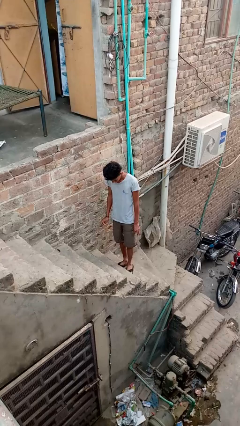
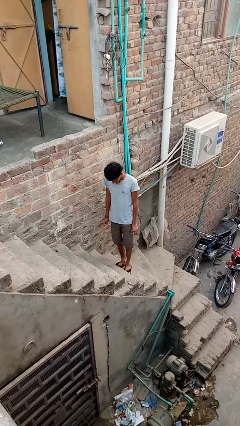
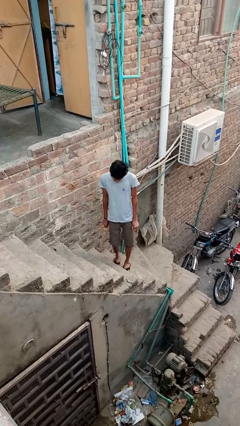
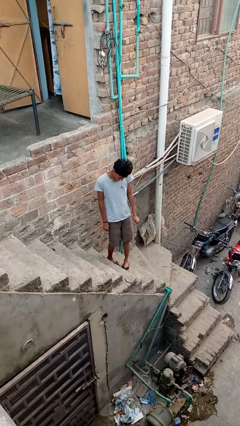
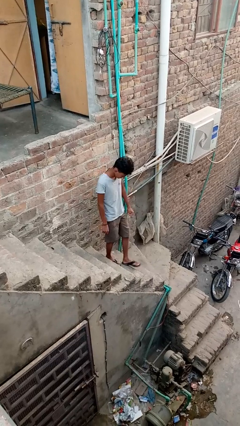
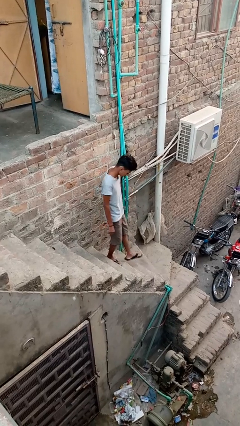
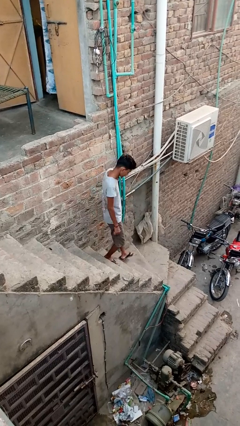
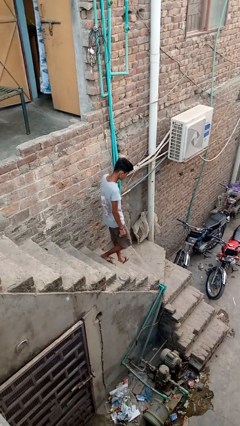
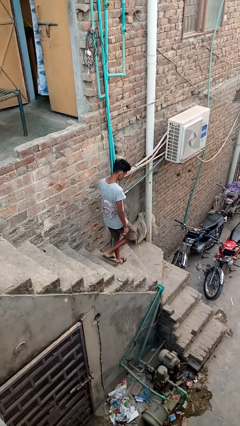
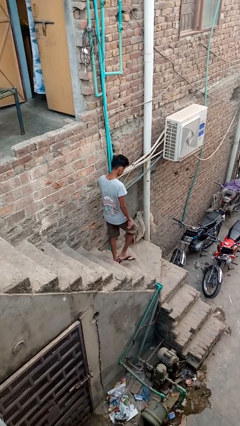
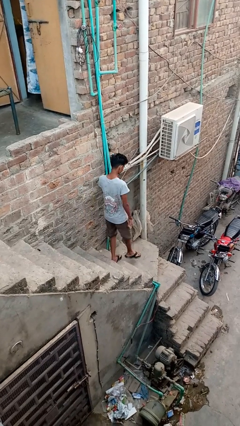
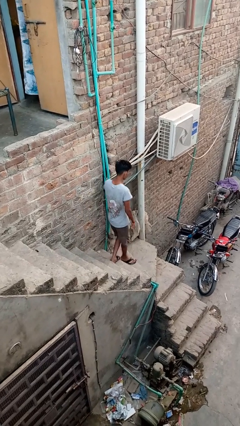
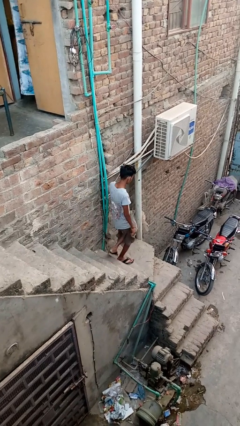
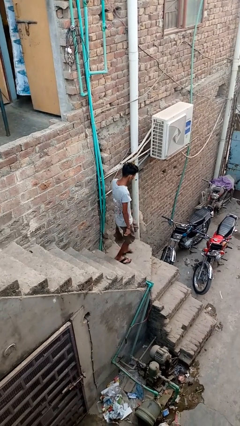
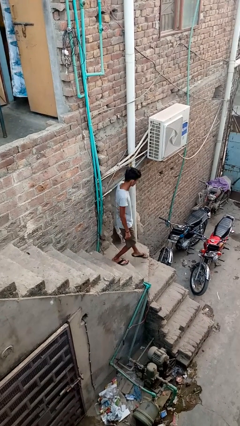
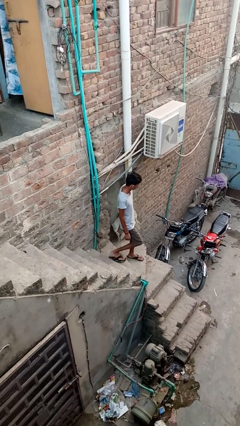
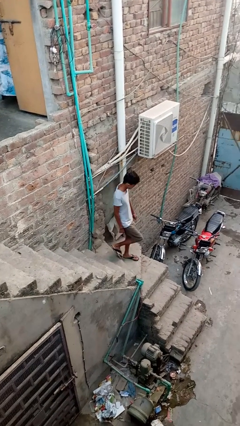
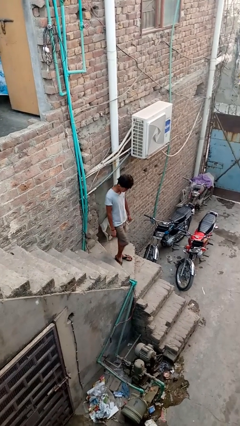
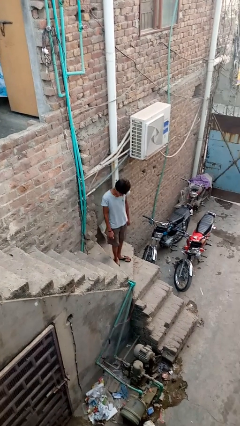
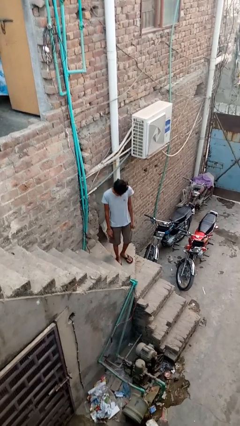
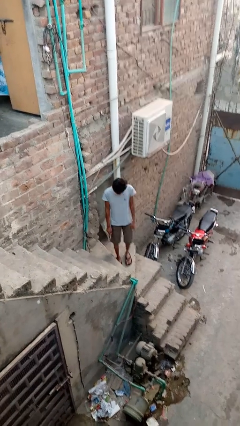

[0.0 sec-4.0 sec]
person climbs down stairs

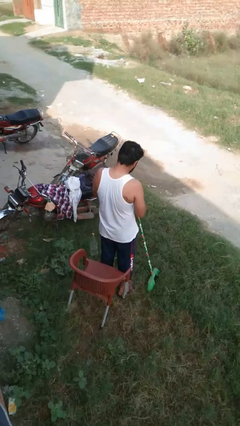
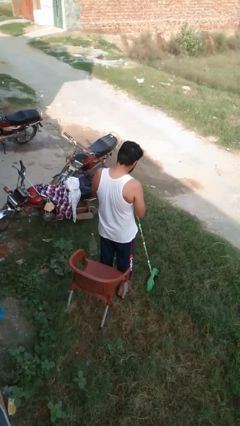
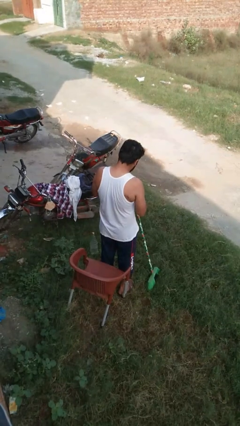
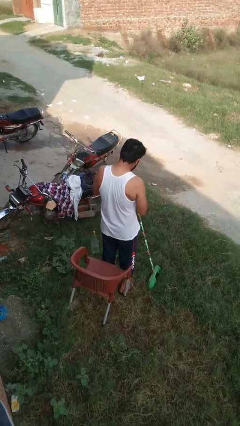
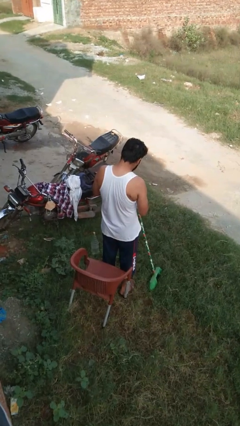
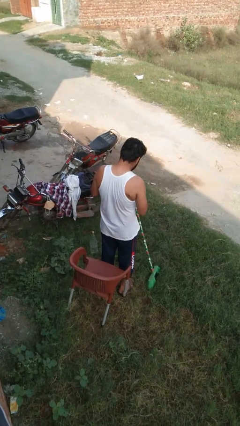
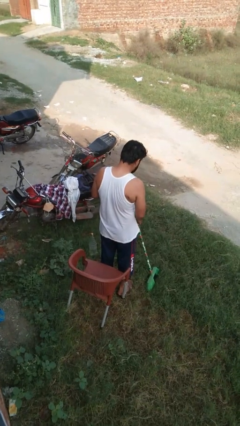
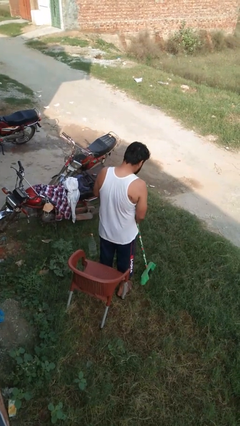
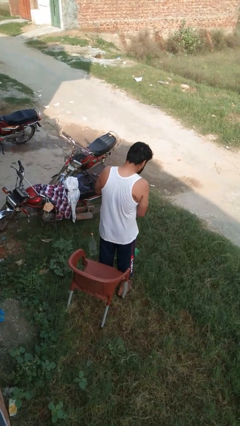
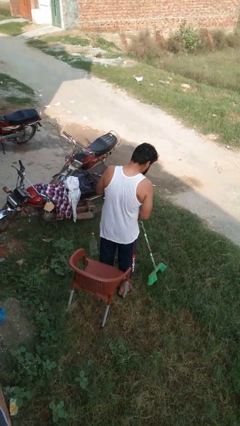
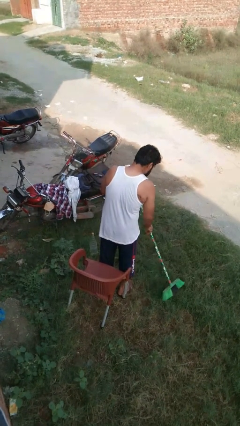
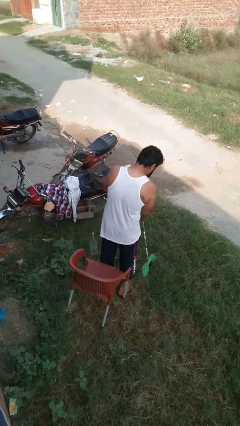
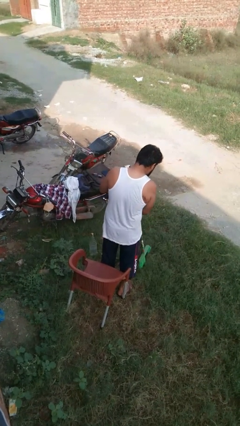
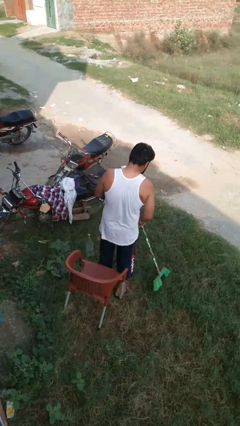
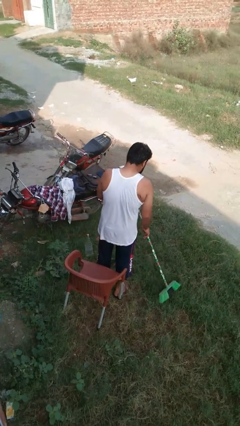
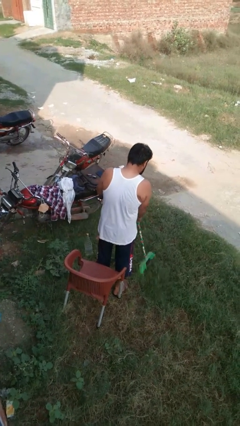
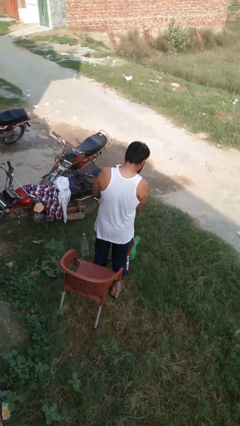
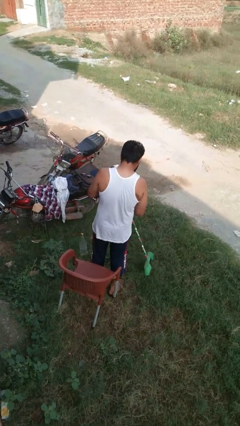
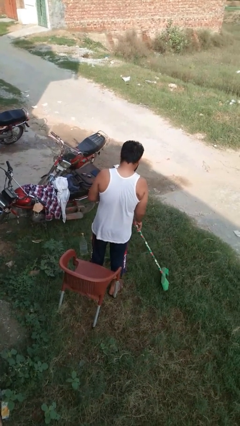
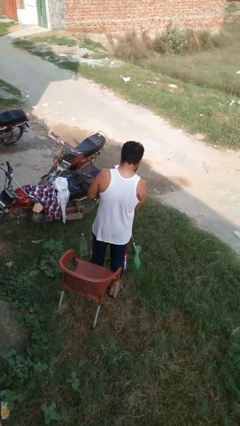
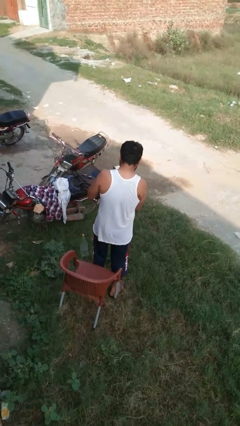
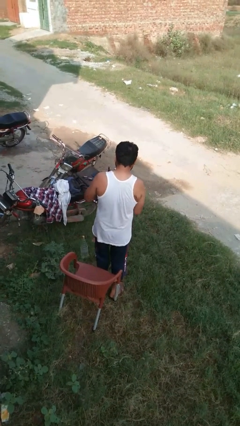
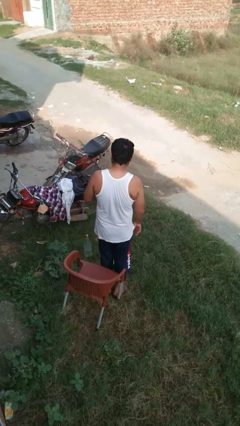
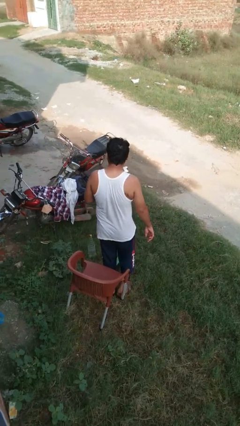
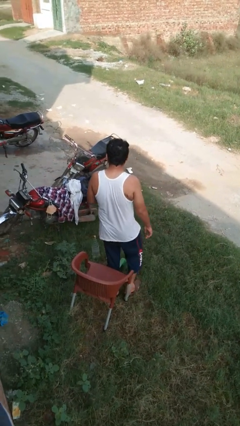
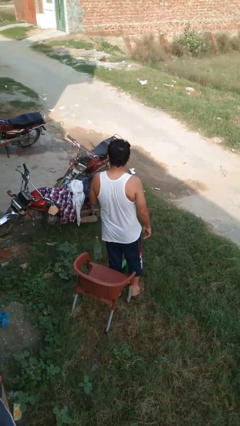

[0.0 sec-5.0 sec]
person sweeps floor

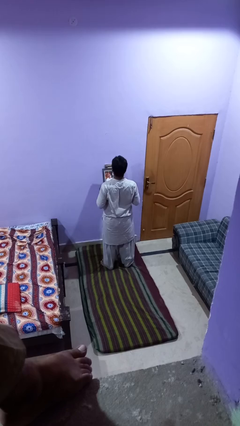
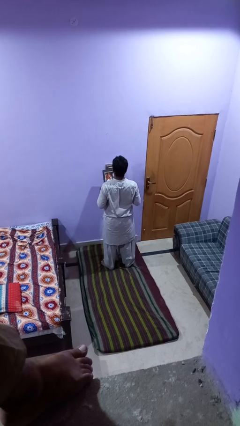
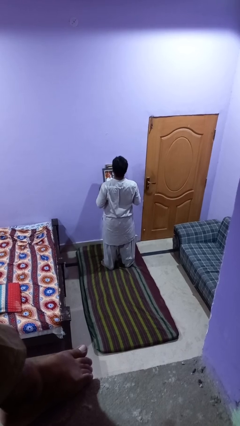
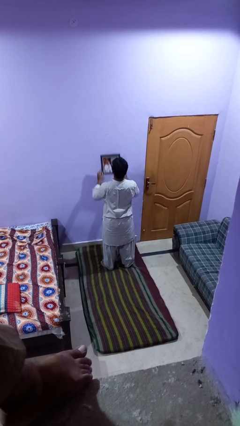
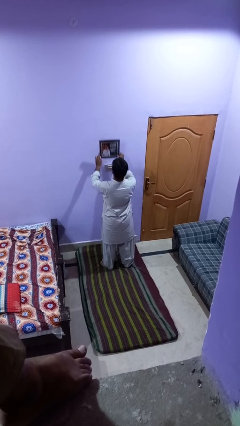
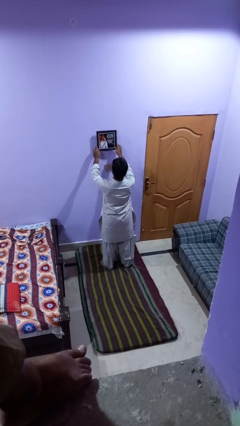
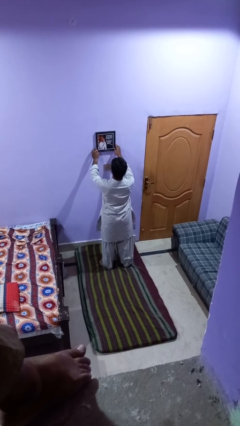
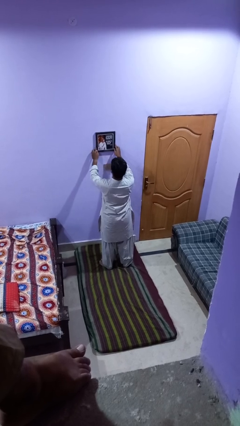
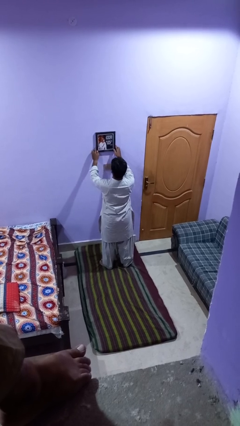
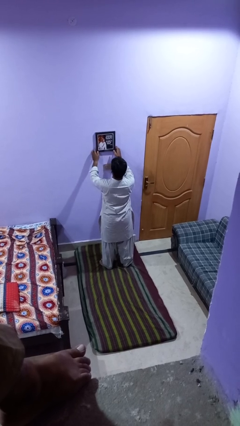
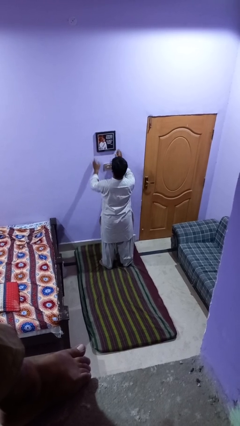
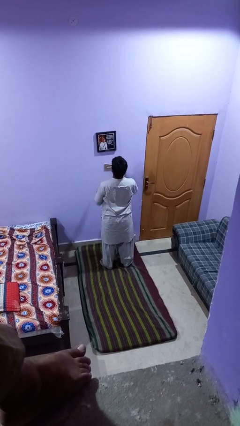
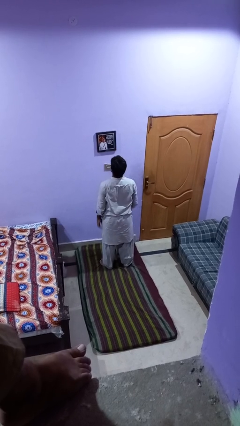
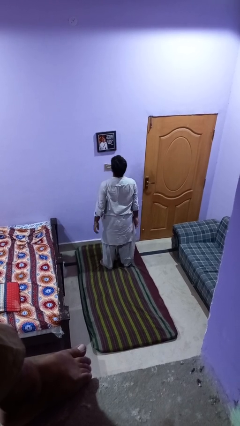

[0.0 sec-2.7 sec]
person puts up picture frame

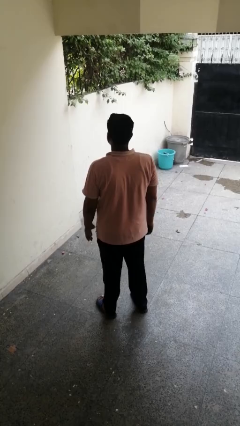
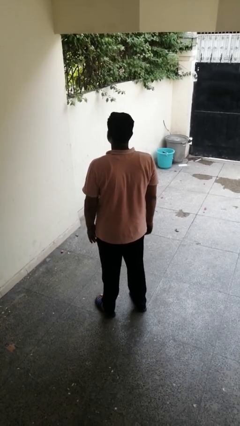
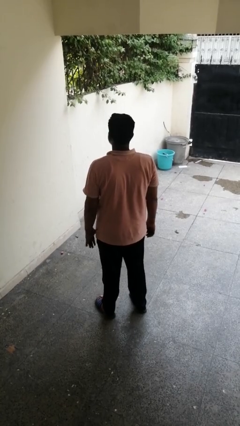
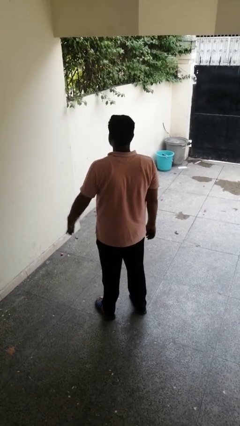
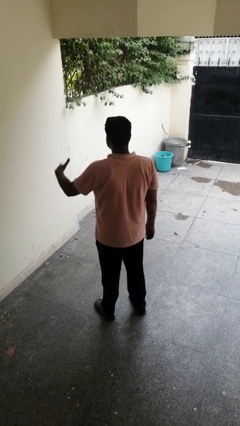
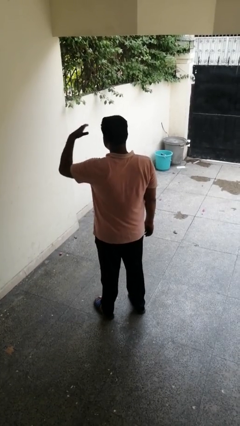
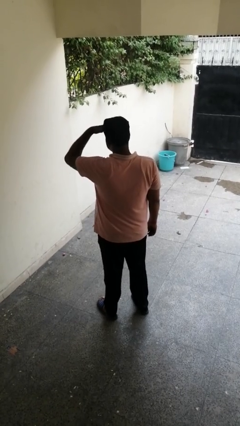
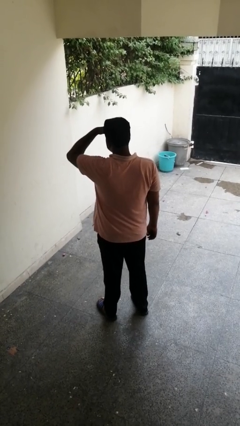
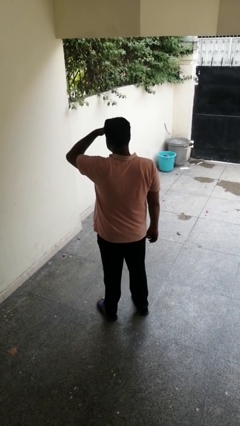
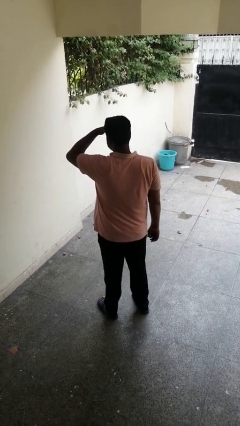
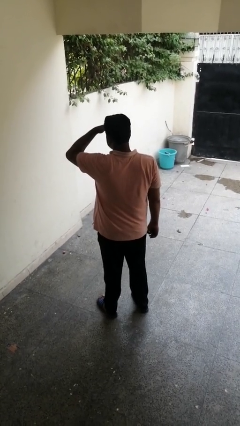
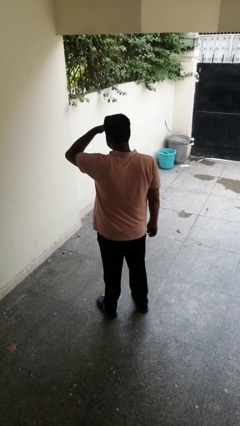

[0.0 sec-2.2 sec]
person shades eyes

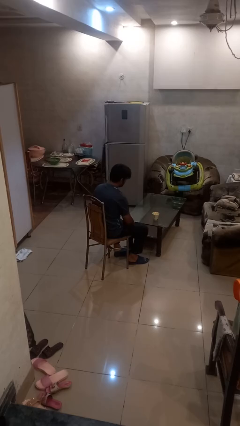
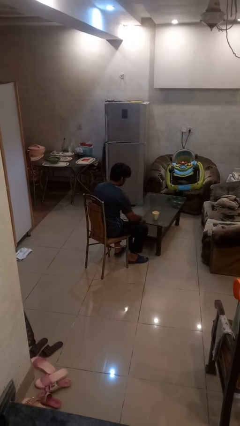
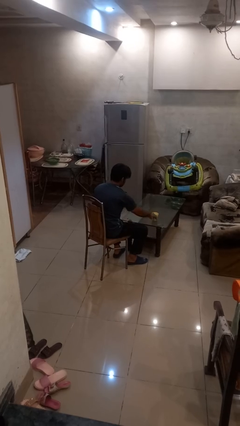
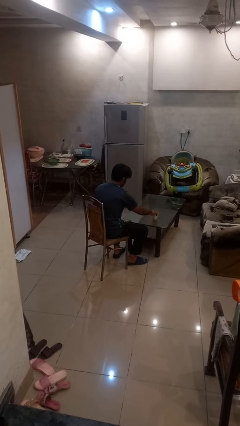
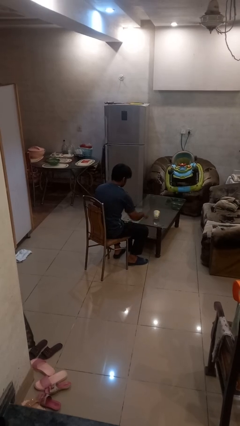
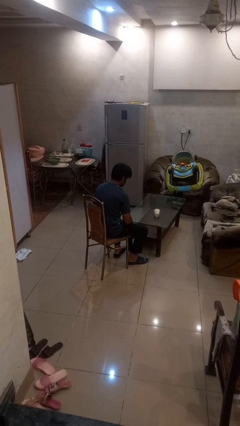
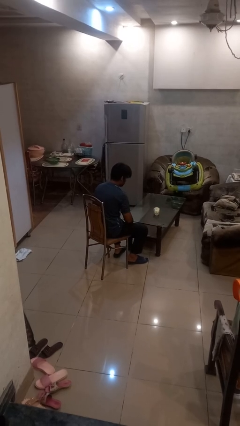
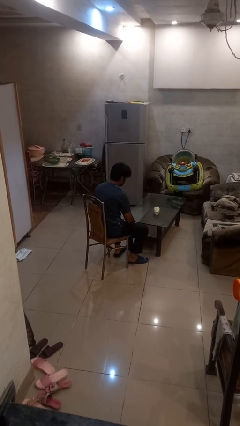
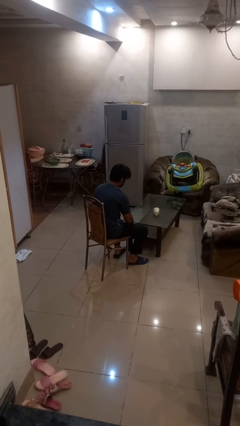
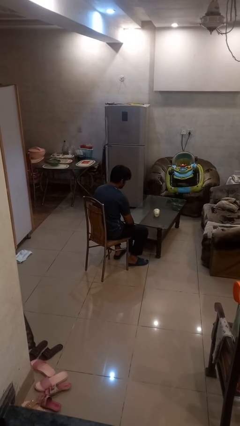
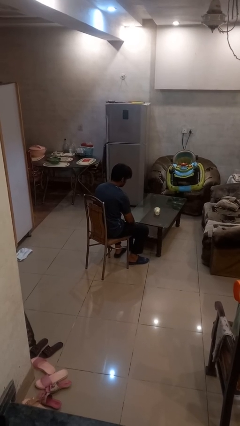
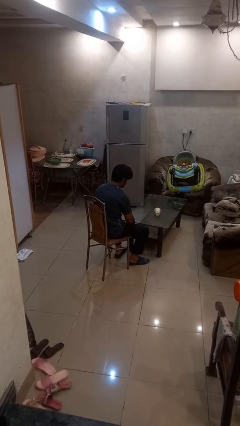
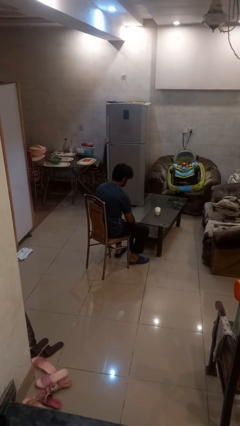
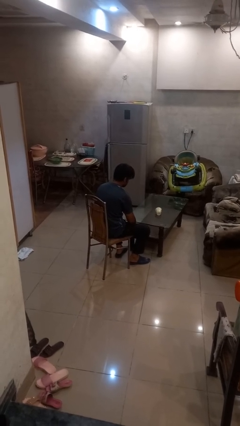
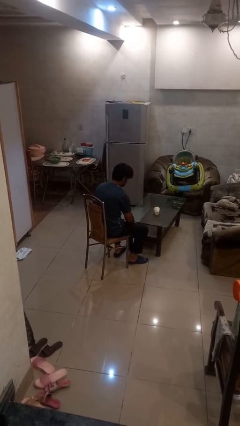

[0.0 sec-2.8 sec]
person knocks over glass

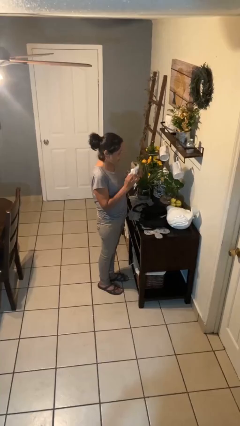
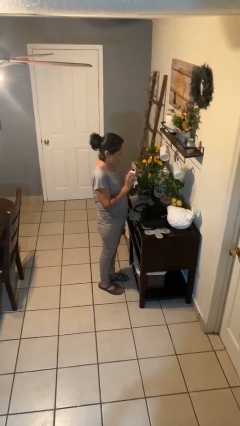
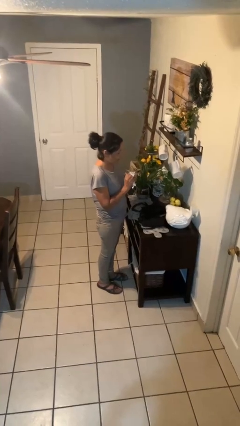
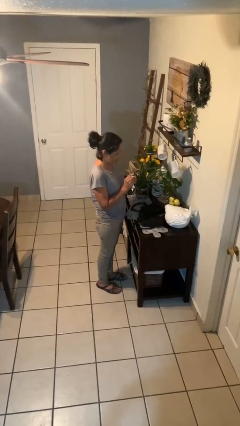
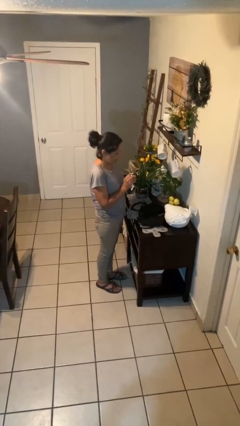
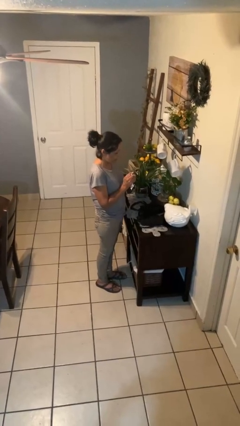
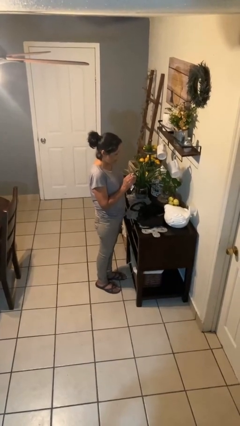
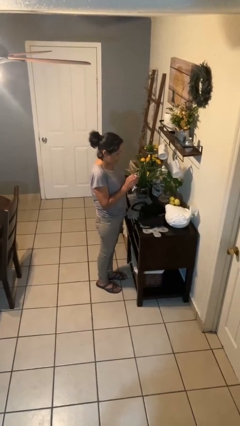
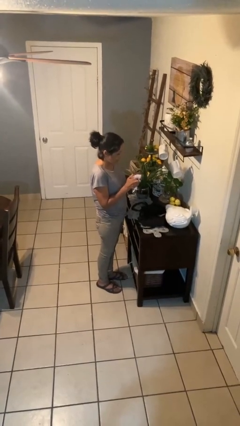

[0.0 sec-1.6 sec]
person crumples paper
